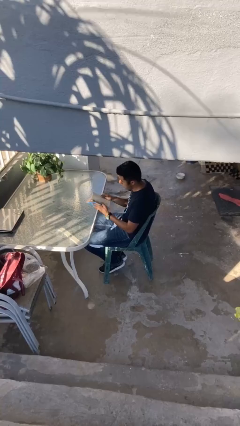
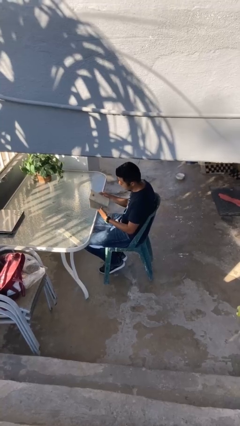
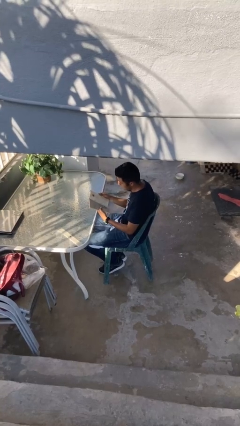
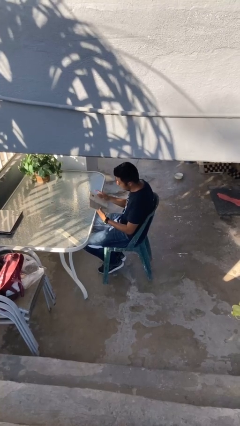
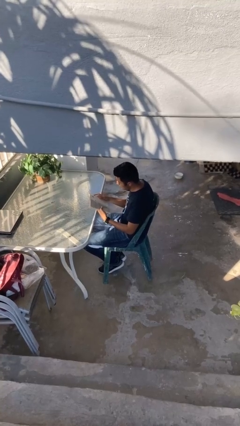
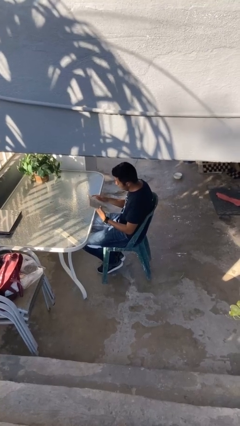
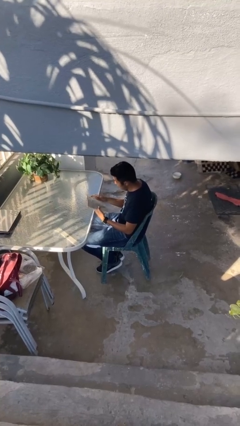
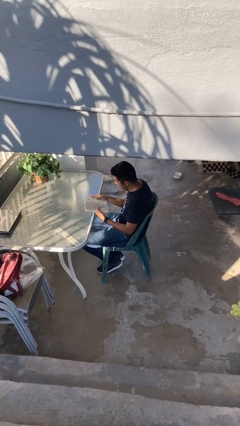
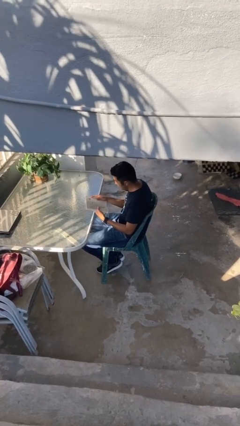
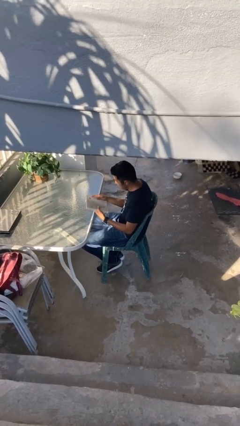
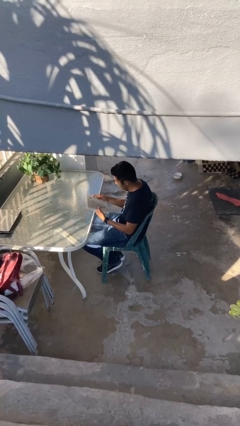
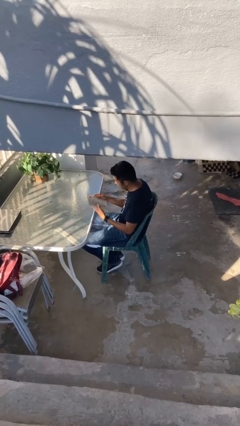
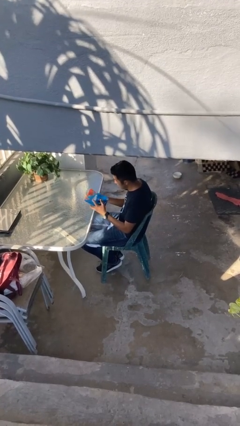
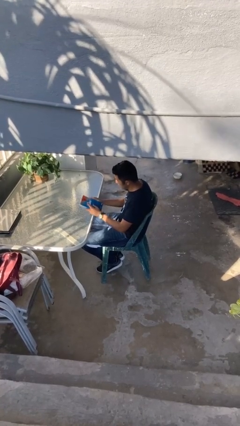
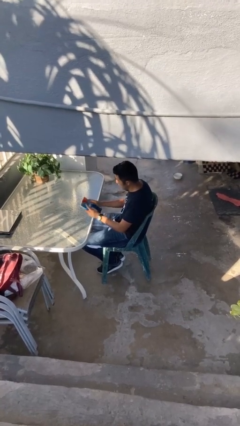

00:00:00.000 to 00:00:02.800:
person reads document

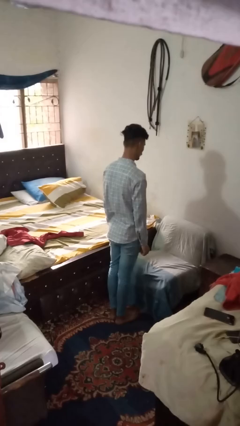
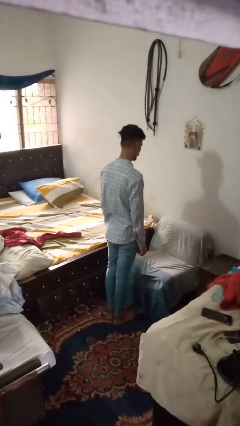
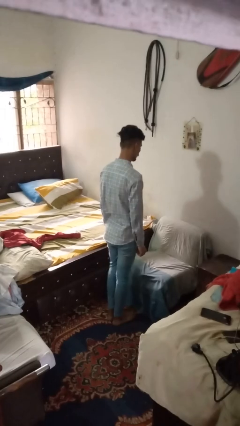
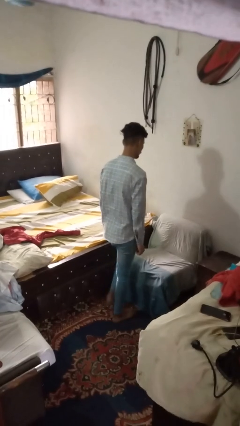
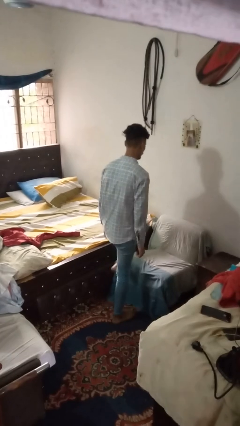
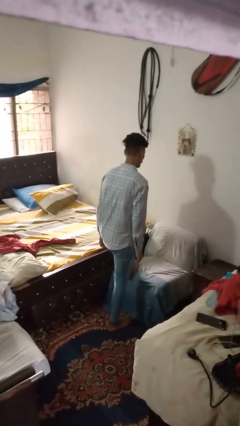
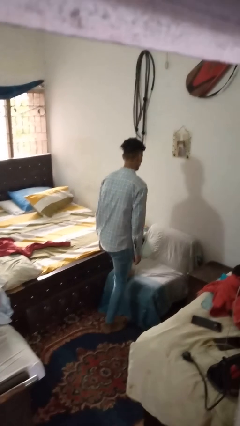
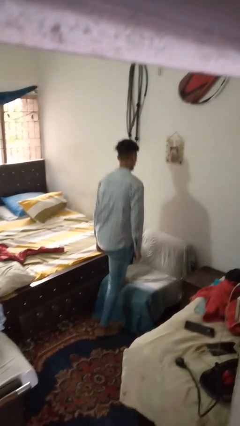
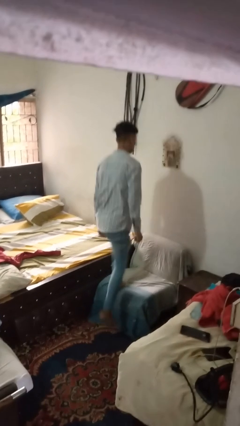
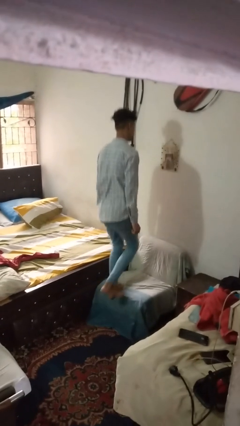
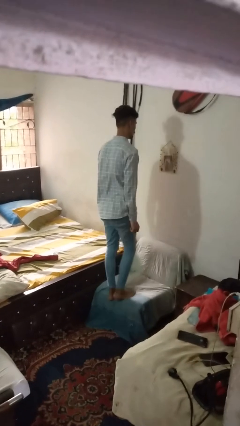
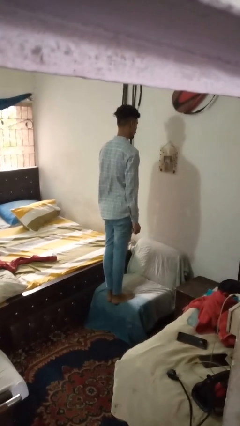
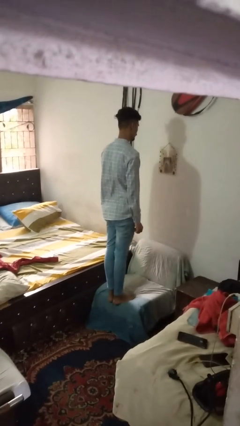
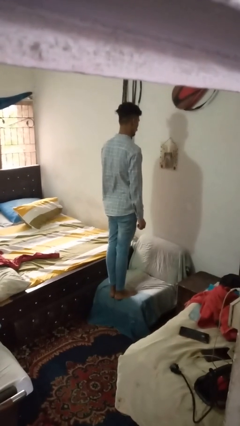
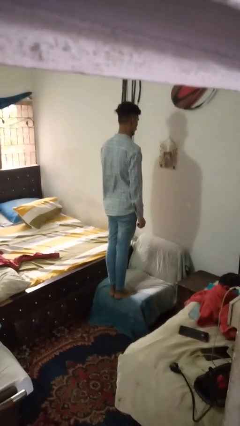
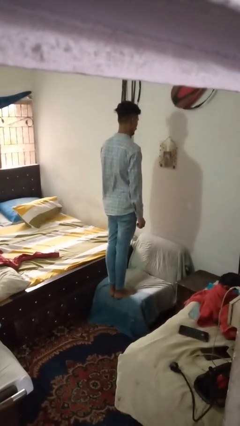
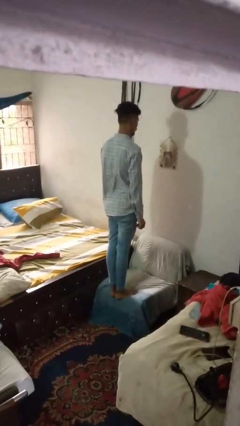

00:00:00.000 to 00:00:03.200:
person climbs on couch

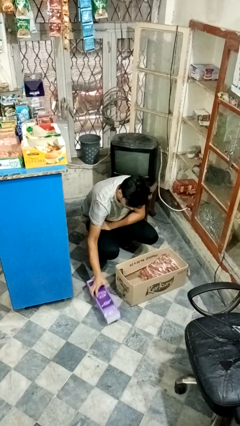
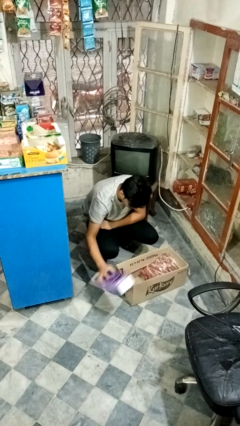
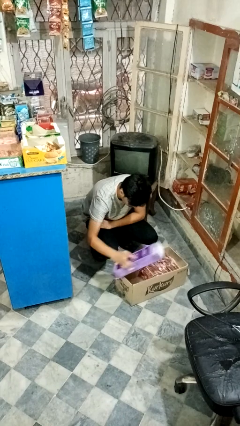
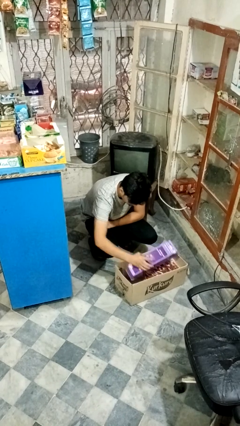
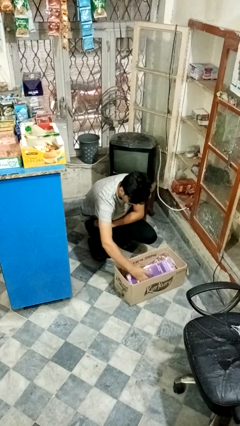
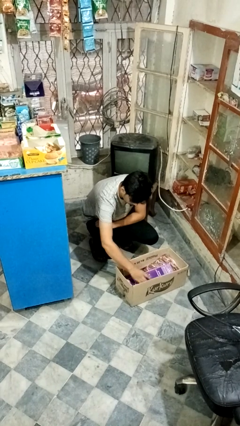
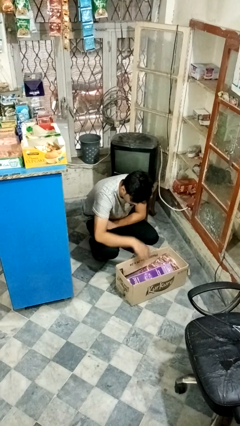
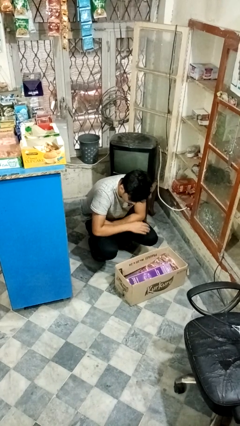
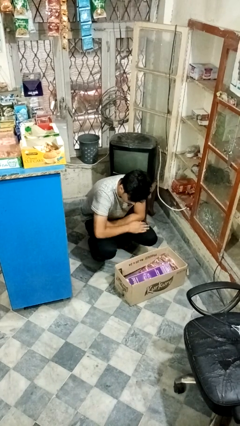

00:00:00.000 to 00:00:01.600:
person puts object into box

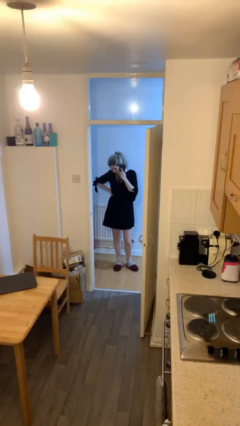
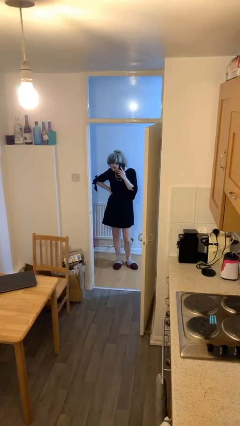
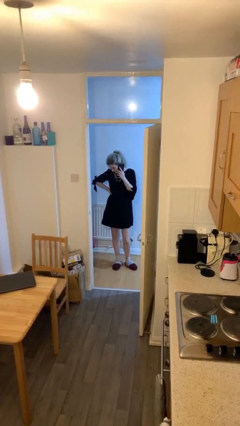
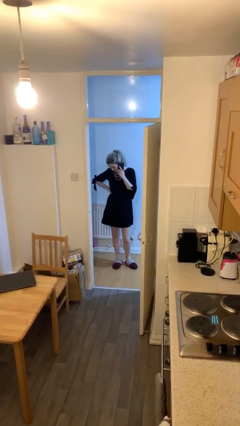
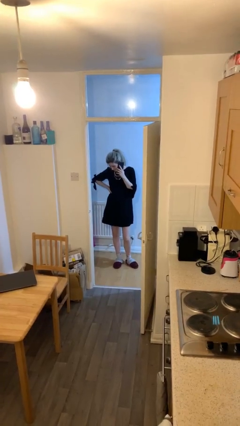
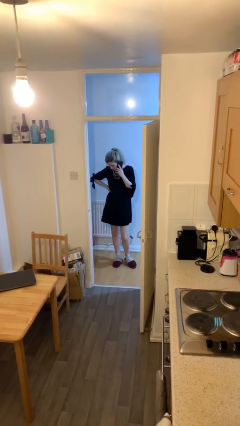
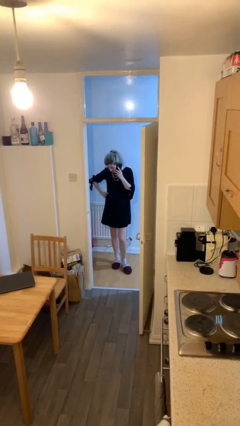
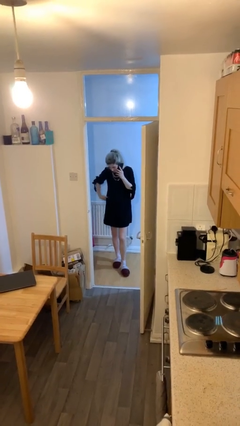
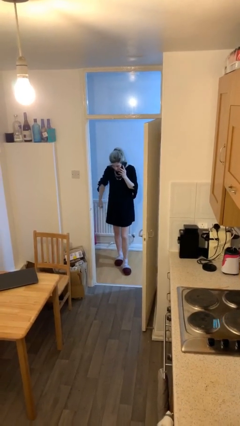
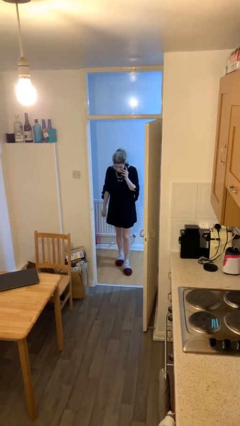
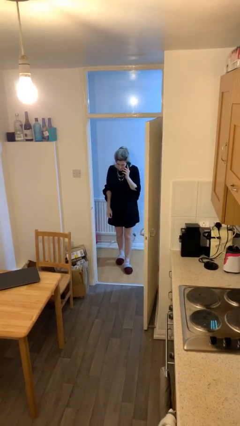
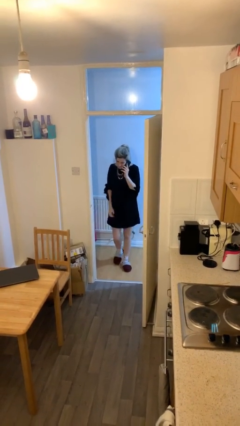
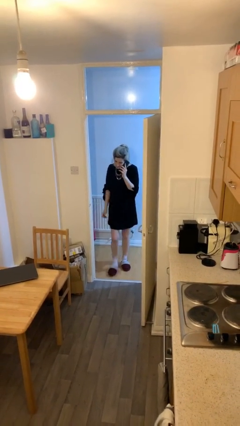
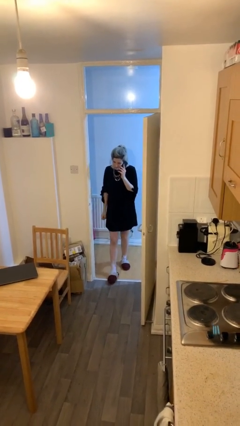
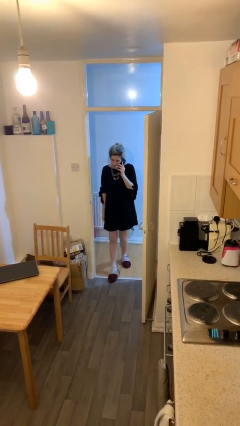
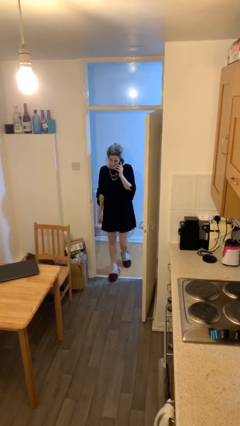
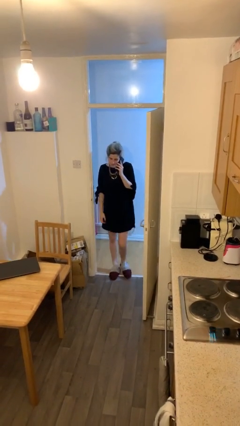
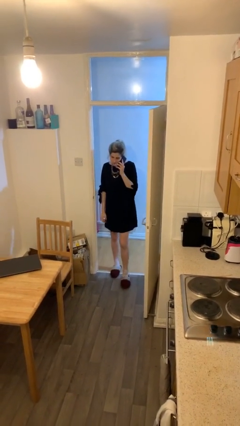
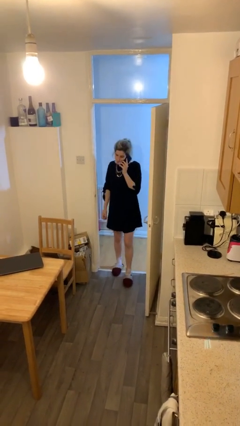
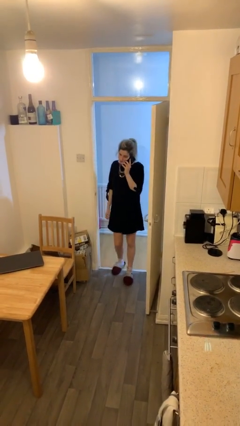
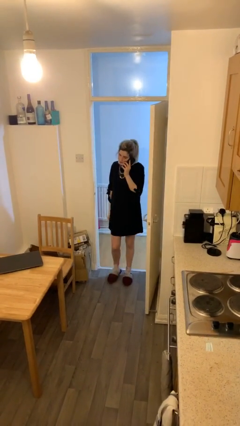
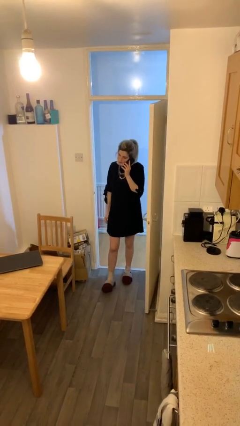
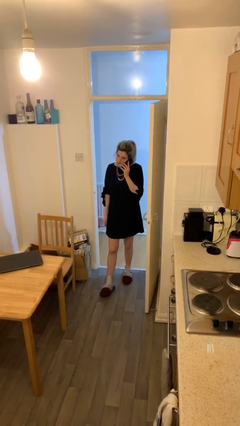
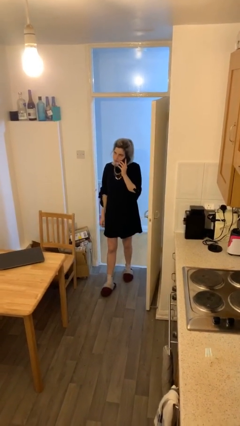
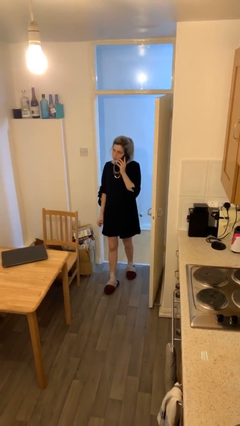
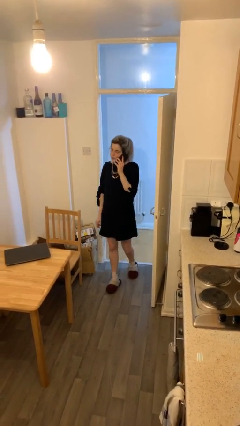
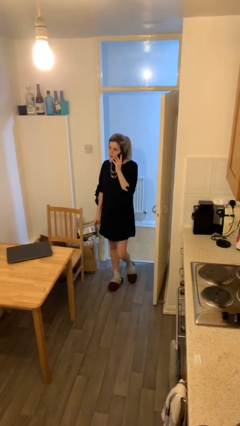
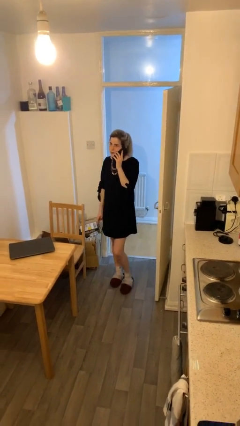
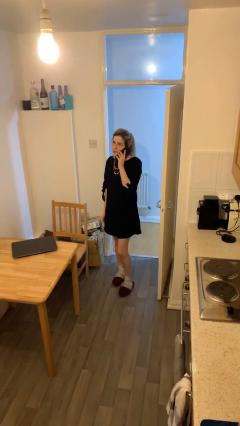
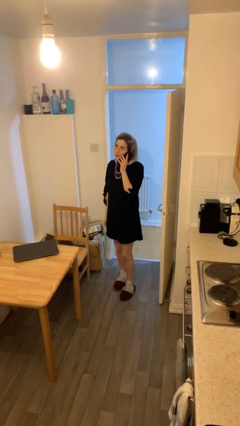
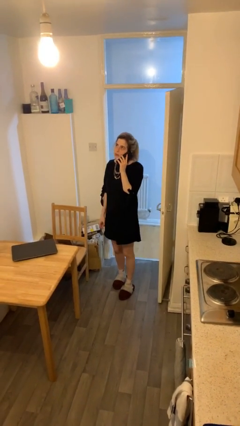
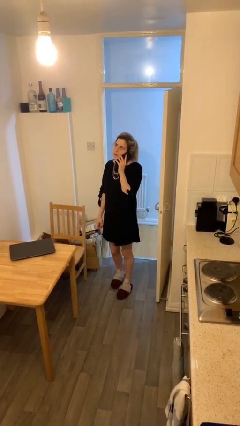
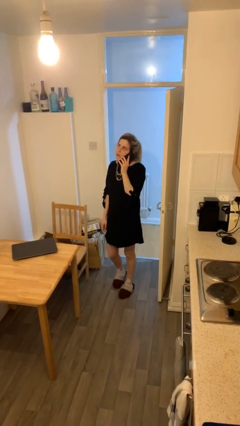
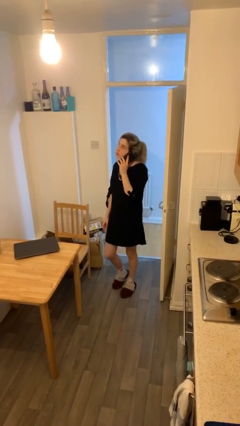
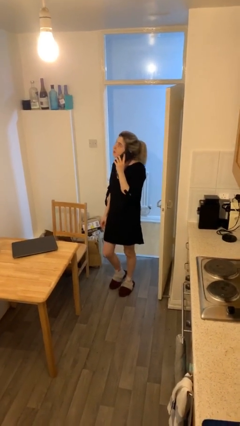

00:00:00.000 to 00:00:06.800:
person enters scene through structure

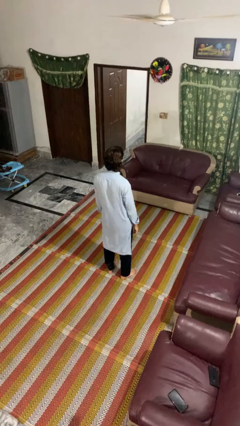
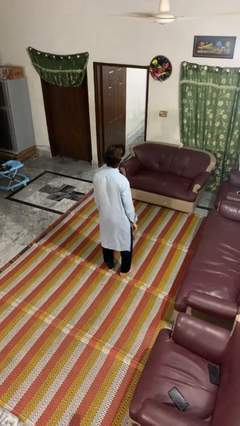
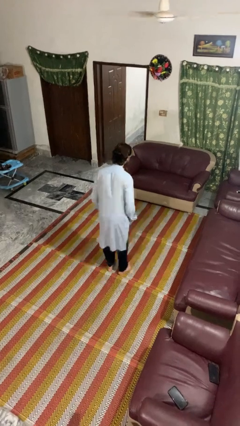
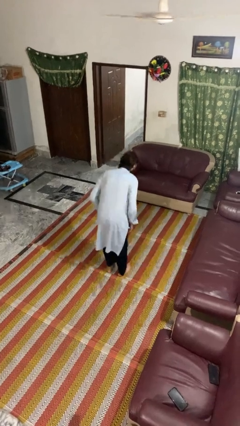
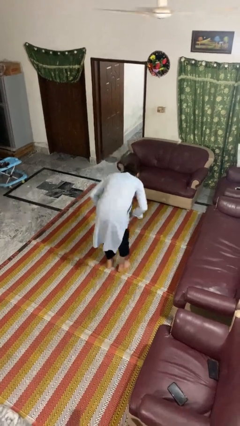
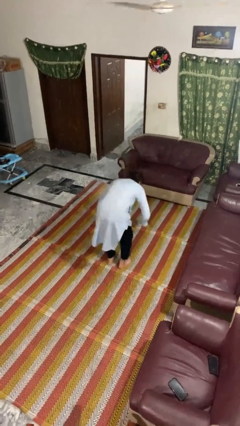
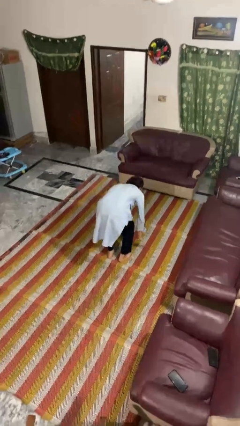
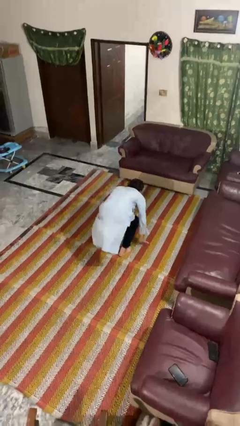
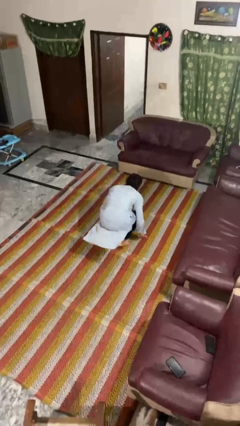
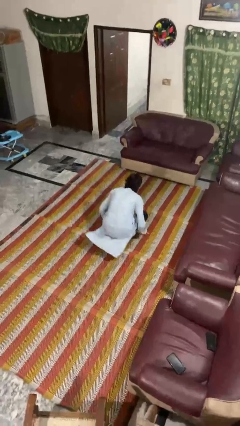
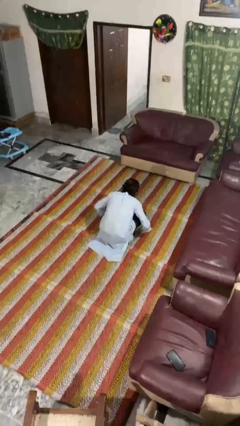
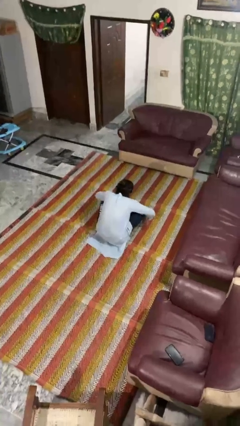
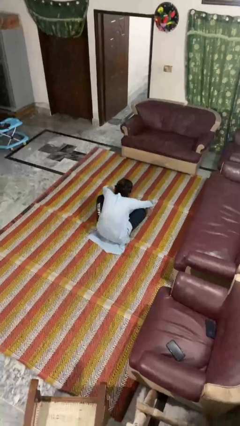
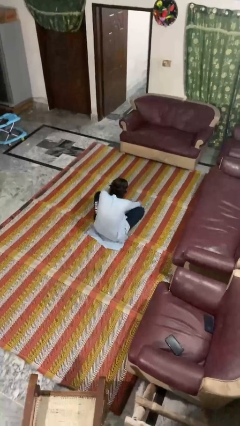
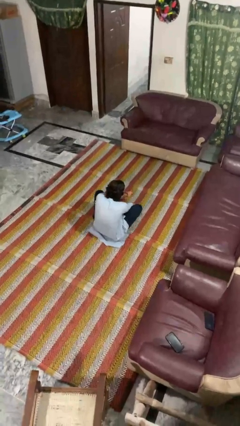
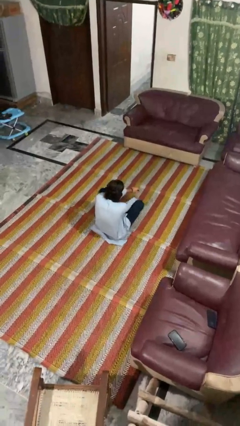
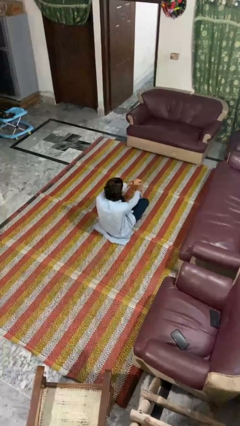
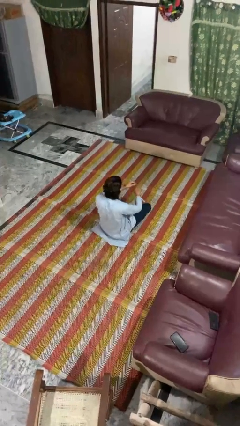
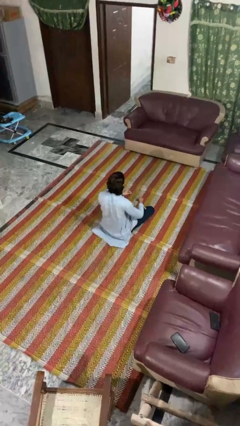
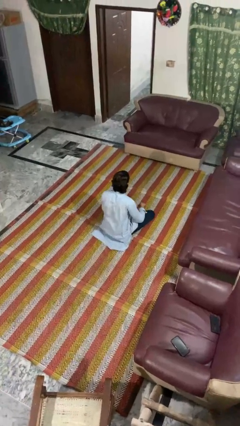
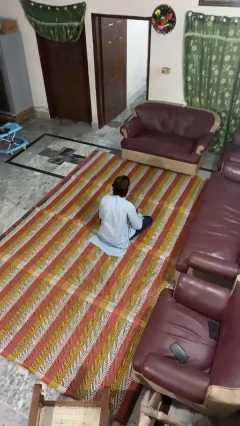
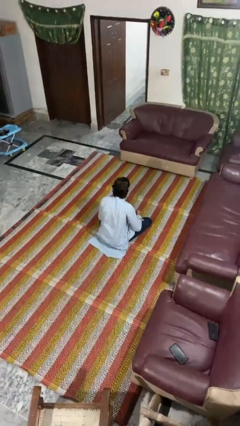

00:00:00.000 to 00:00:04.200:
person sits crisscross
